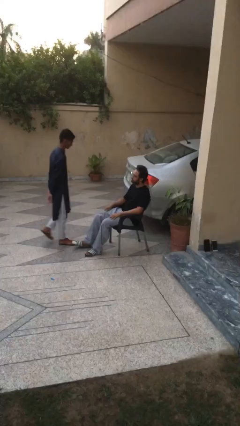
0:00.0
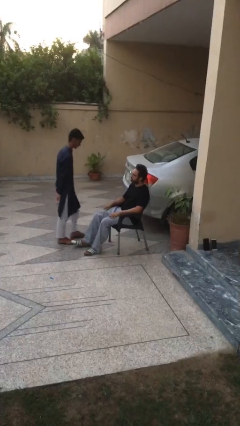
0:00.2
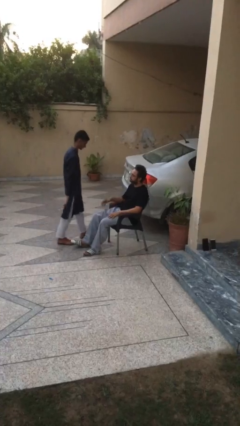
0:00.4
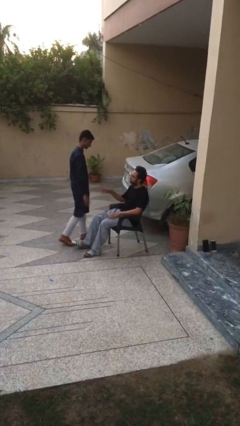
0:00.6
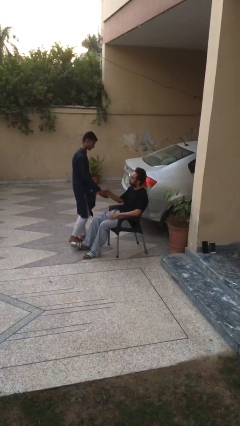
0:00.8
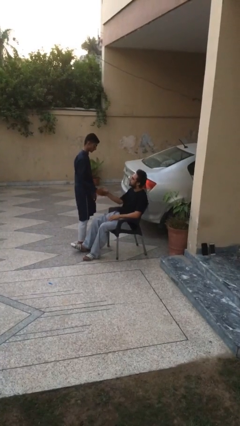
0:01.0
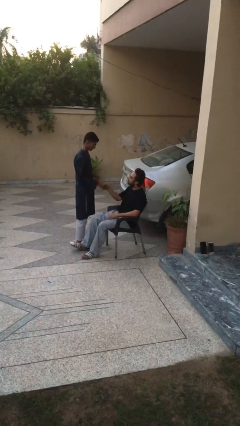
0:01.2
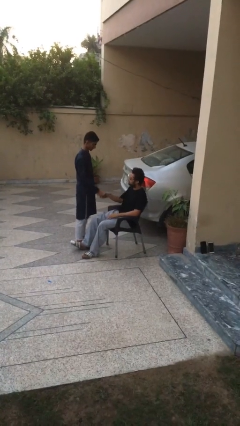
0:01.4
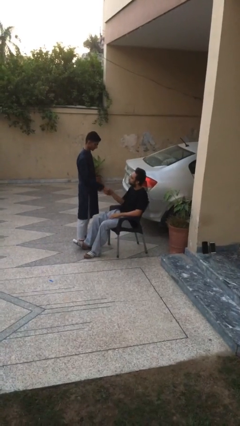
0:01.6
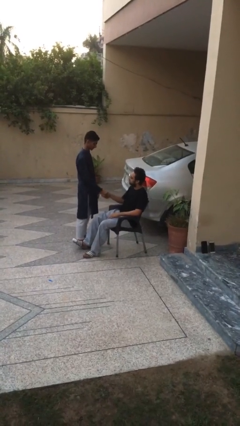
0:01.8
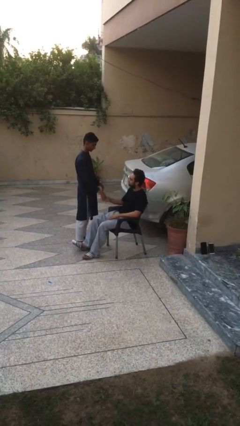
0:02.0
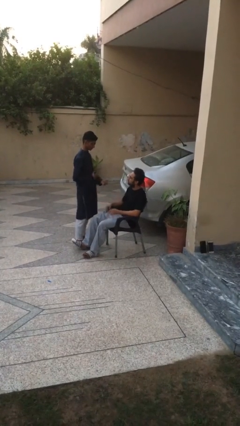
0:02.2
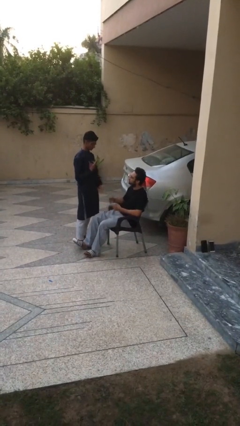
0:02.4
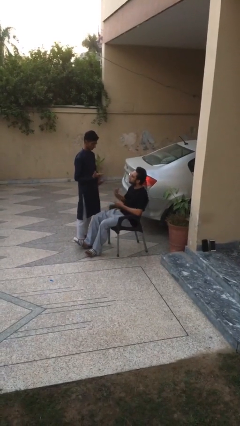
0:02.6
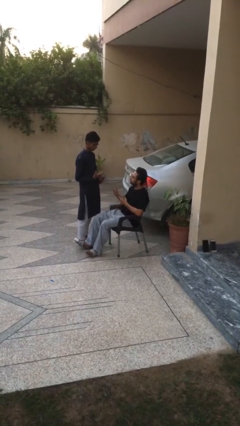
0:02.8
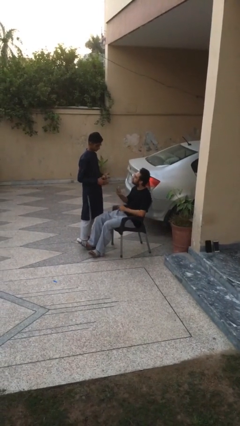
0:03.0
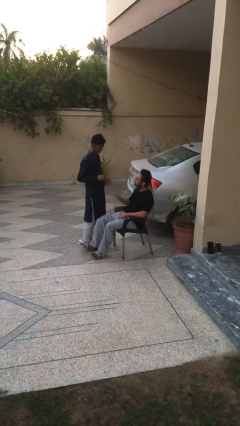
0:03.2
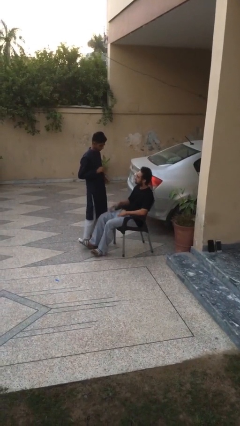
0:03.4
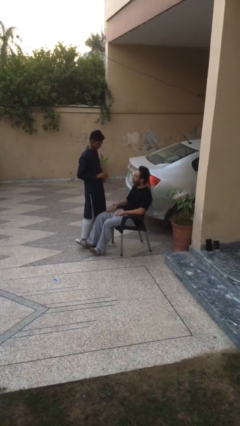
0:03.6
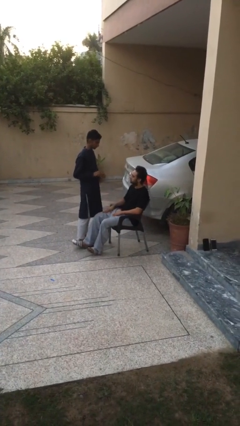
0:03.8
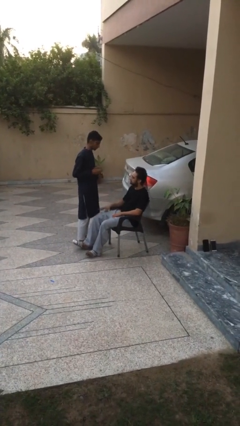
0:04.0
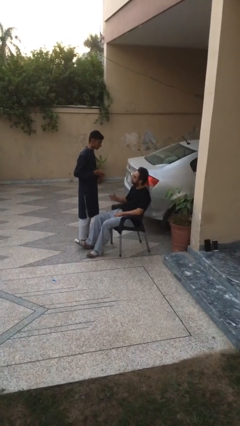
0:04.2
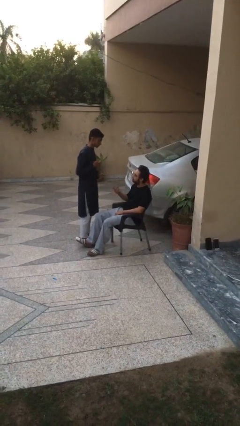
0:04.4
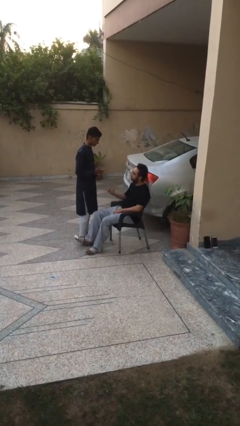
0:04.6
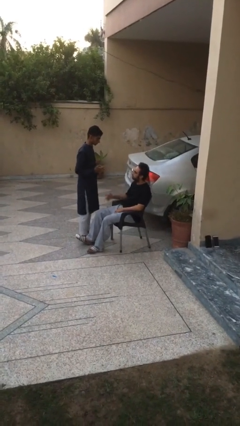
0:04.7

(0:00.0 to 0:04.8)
person shakes hand

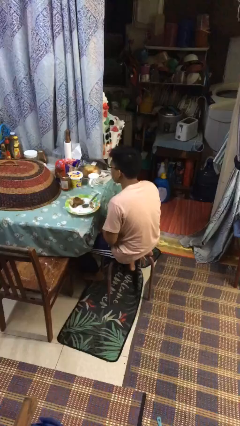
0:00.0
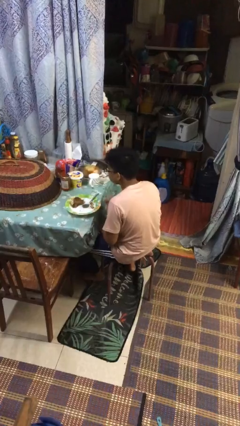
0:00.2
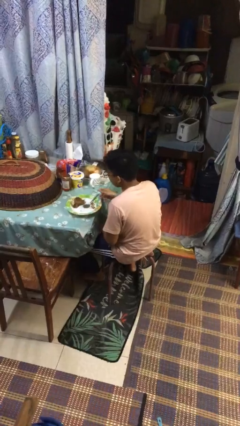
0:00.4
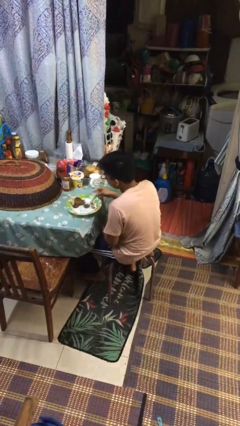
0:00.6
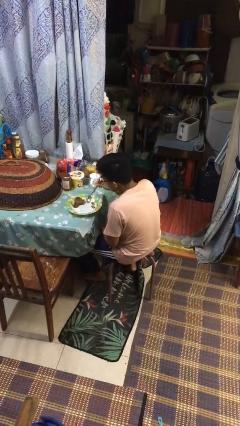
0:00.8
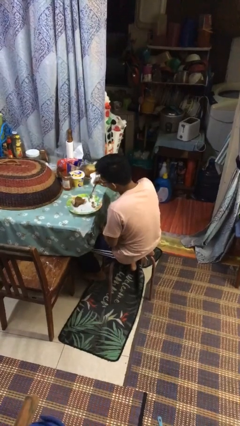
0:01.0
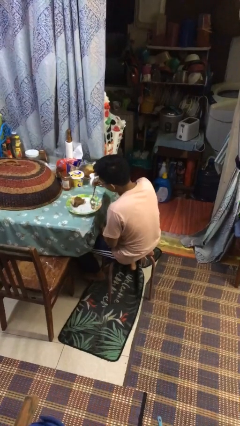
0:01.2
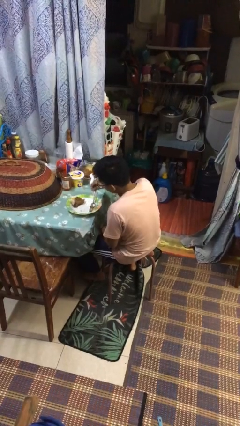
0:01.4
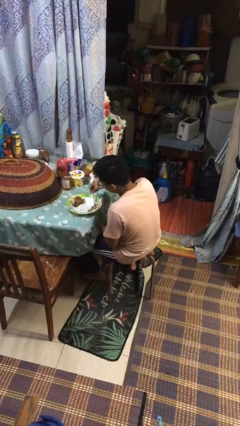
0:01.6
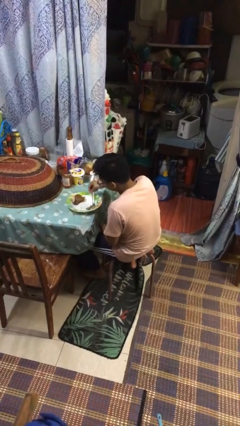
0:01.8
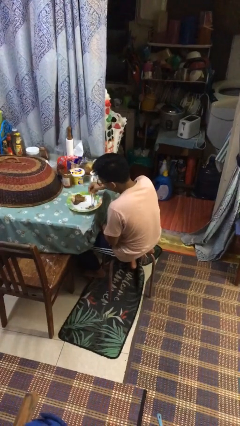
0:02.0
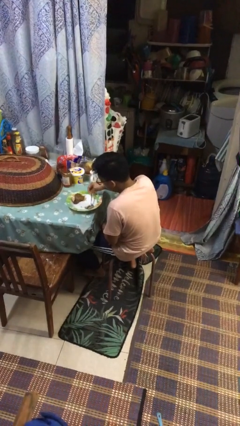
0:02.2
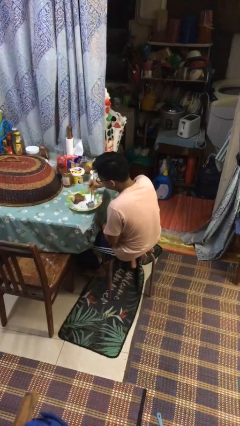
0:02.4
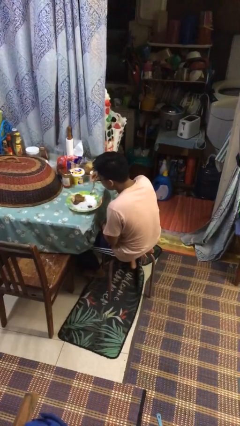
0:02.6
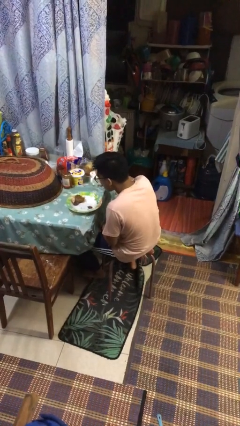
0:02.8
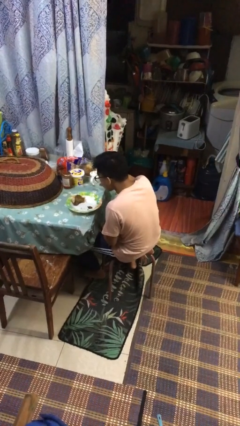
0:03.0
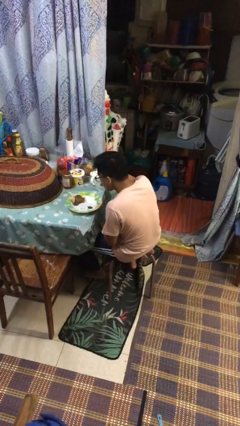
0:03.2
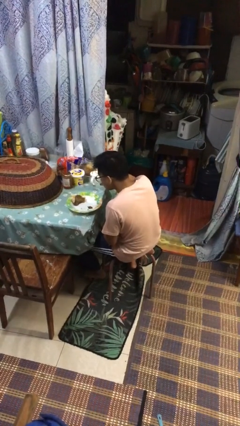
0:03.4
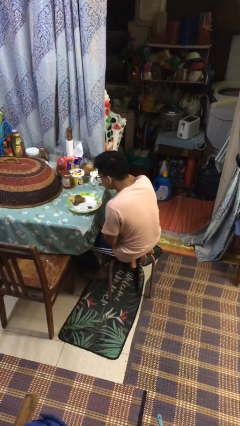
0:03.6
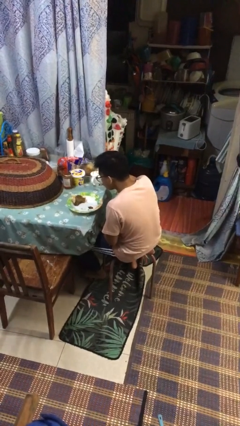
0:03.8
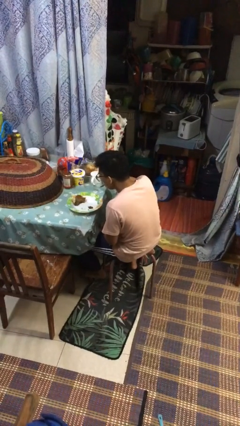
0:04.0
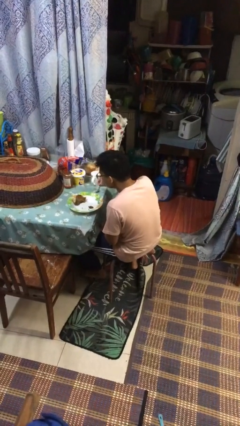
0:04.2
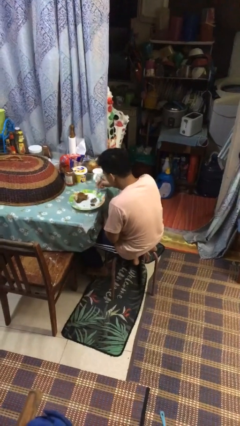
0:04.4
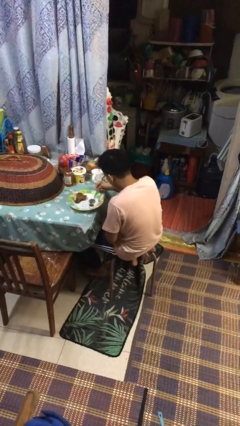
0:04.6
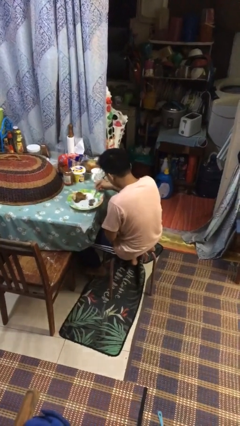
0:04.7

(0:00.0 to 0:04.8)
person eats with utensil

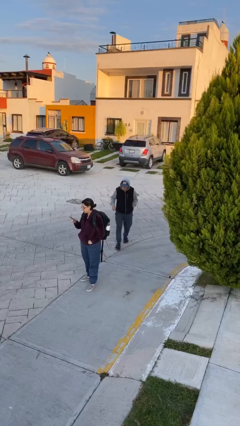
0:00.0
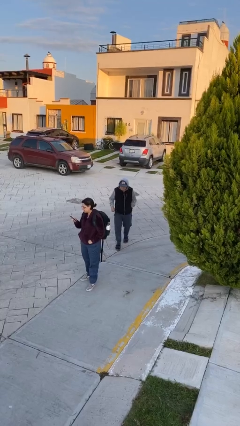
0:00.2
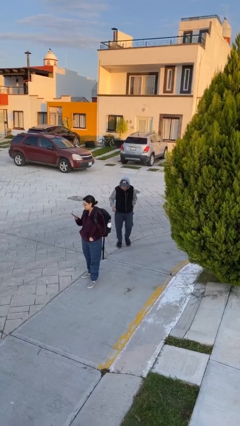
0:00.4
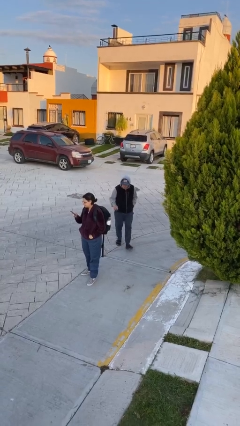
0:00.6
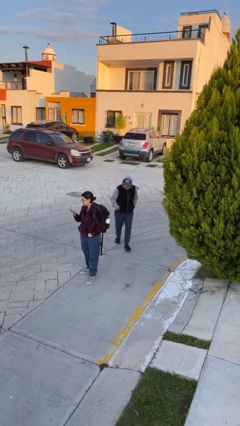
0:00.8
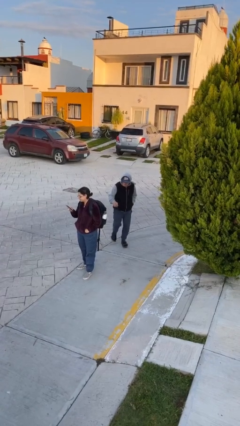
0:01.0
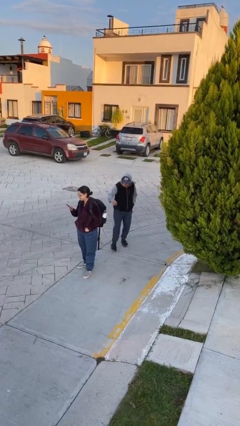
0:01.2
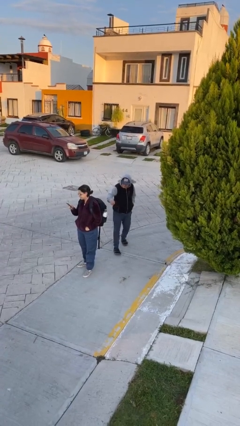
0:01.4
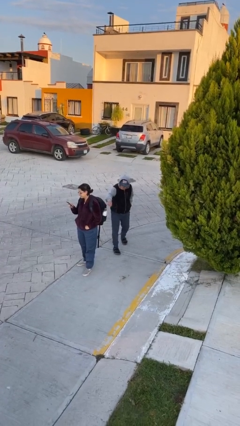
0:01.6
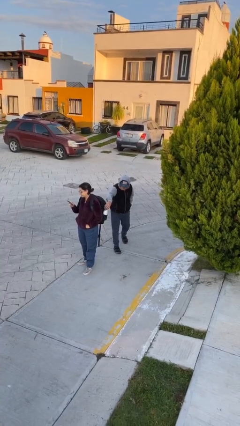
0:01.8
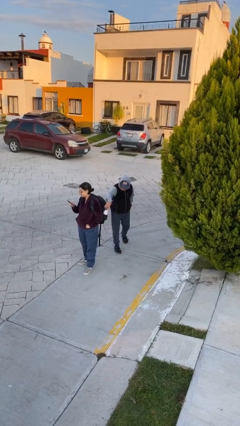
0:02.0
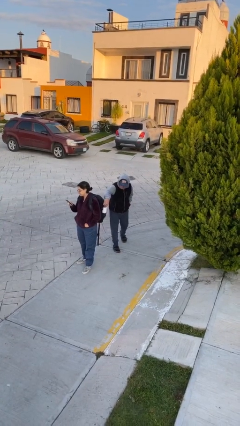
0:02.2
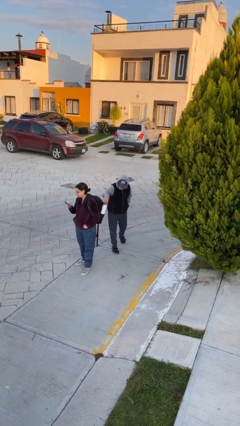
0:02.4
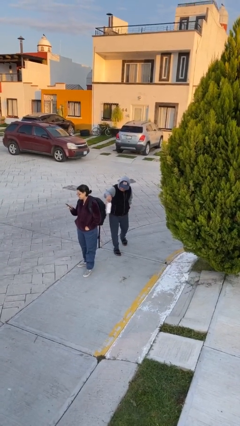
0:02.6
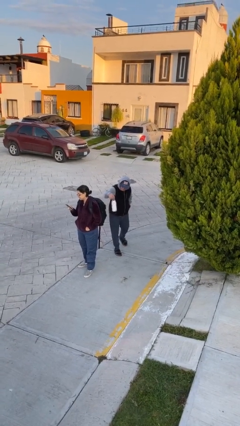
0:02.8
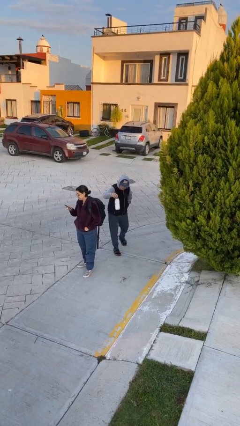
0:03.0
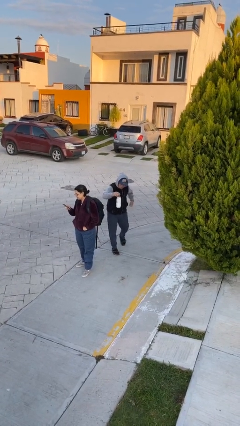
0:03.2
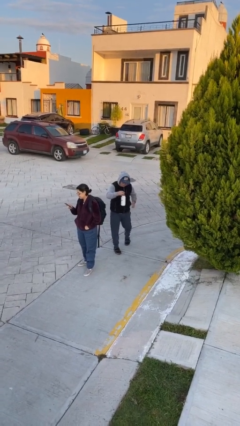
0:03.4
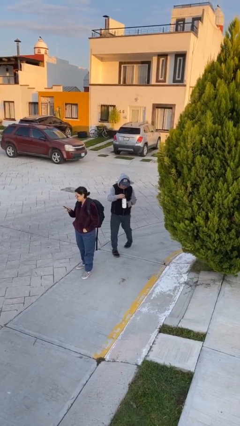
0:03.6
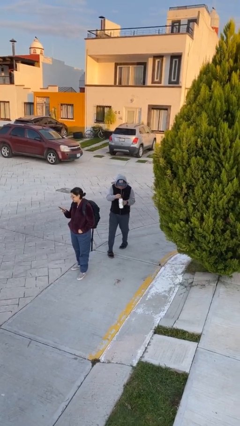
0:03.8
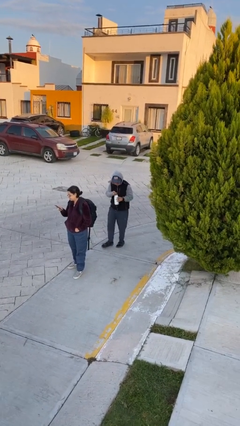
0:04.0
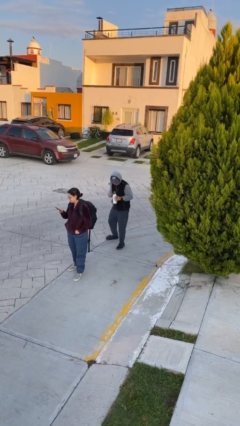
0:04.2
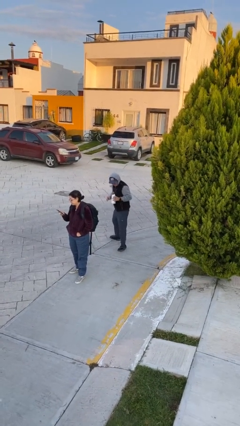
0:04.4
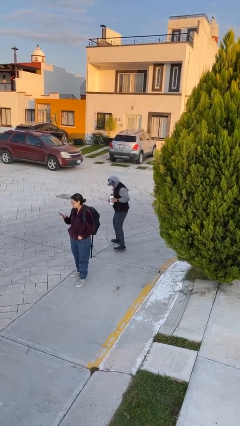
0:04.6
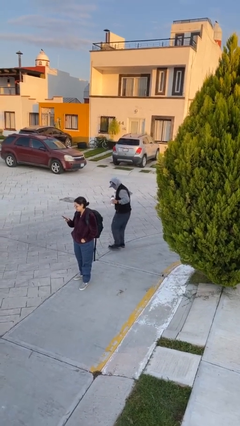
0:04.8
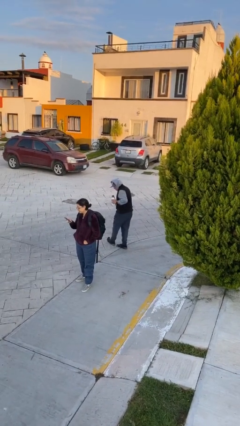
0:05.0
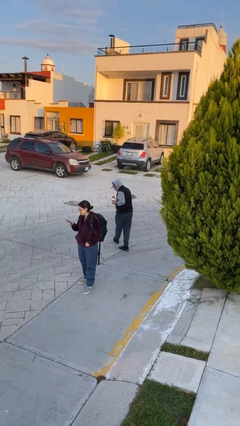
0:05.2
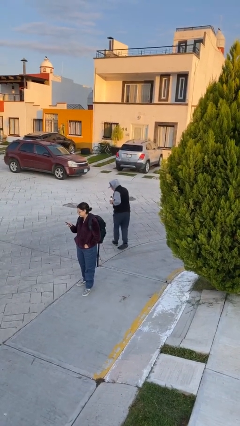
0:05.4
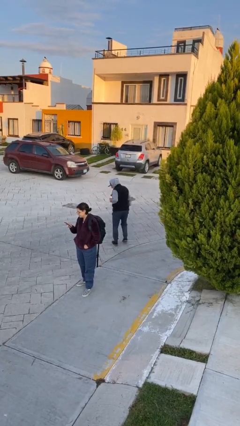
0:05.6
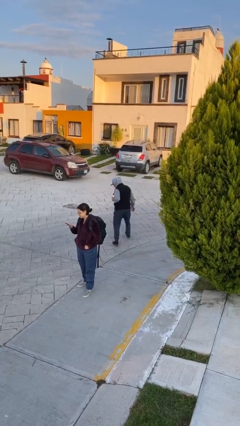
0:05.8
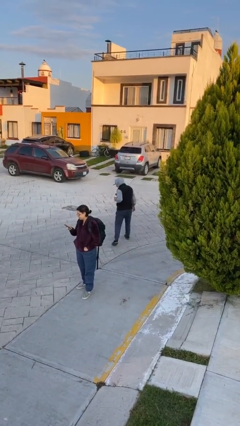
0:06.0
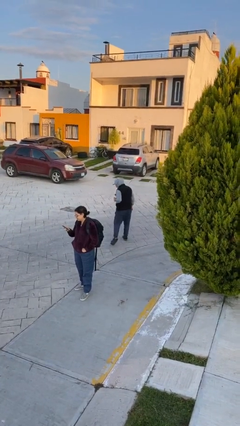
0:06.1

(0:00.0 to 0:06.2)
person steals object from person

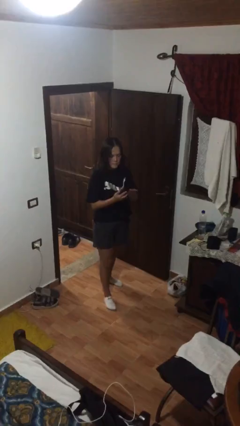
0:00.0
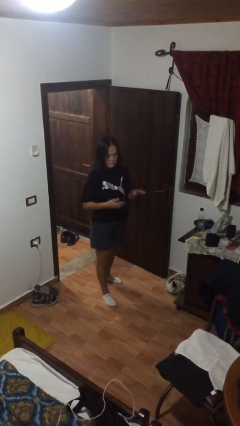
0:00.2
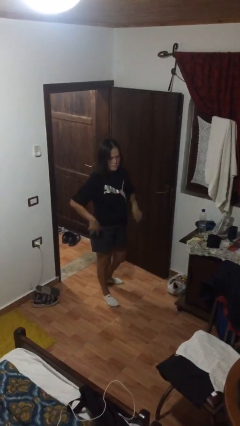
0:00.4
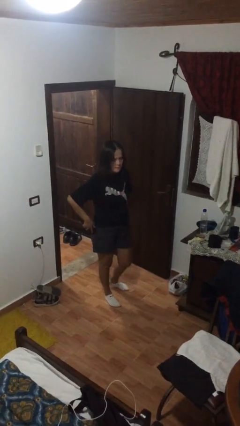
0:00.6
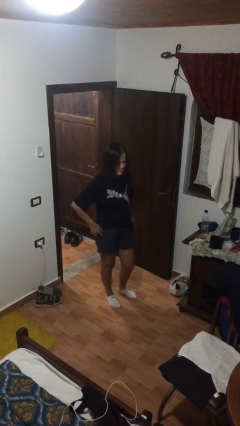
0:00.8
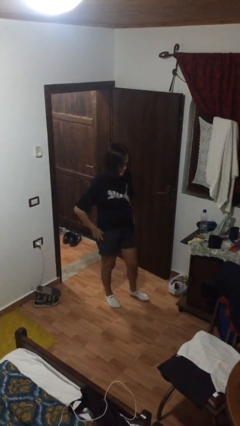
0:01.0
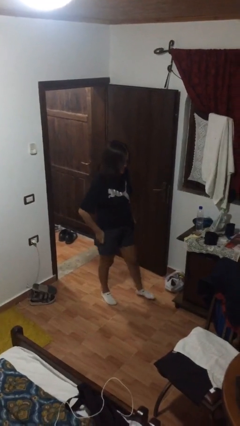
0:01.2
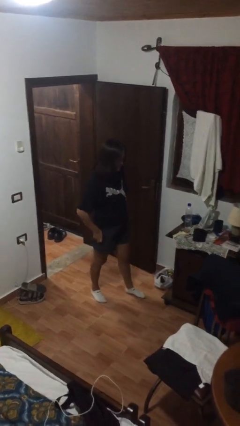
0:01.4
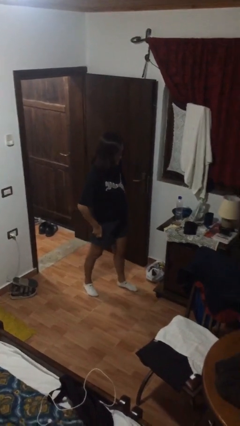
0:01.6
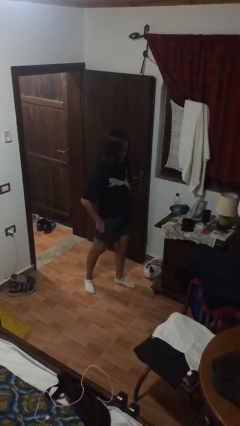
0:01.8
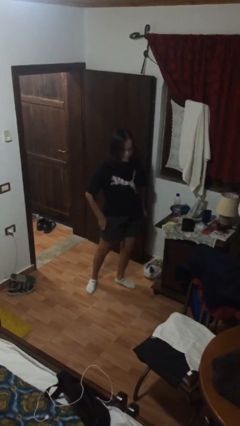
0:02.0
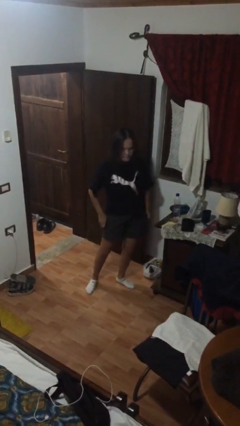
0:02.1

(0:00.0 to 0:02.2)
person puts phone into pocket

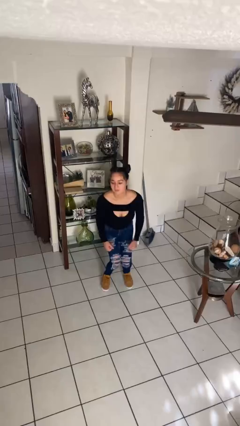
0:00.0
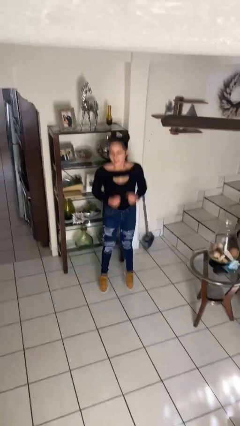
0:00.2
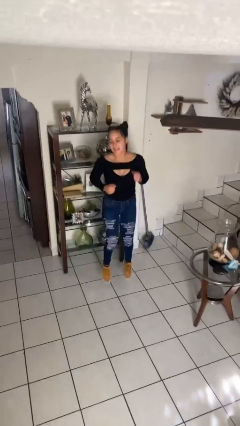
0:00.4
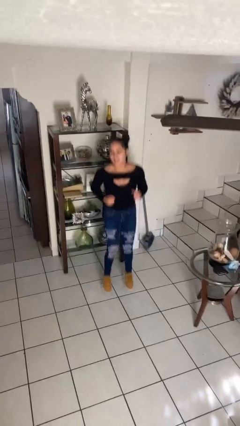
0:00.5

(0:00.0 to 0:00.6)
person jumps
